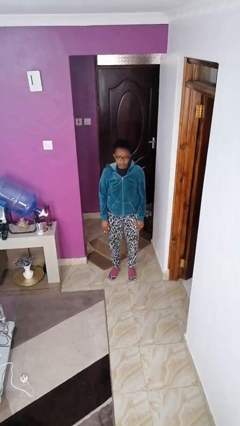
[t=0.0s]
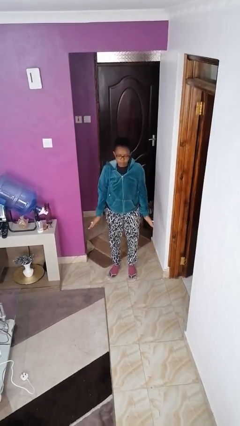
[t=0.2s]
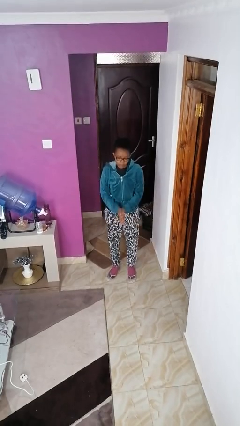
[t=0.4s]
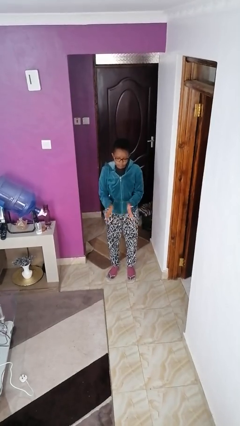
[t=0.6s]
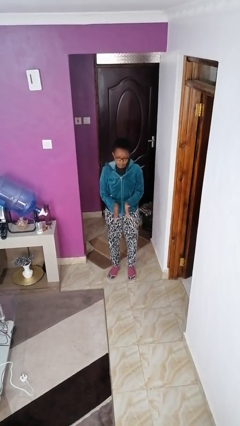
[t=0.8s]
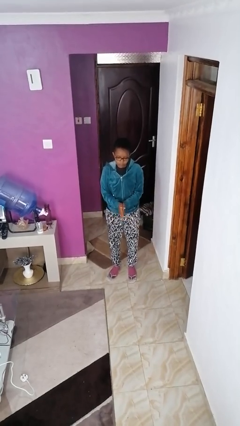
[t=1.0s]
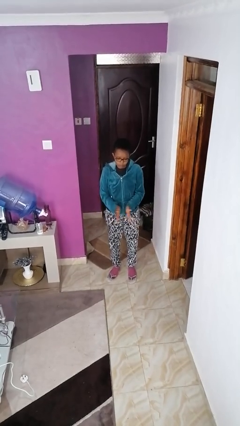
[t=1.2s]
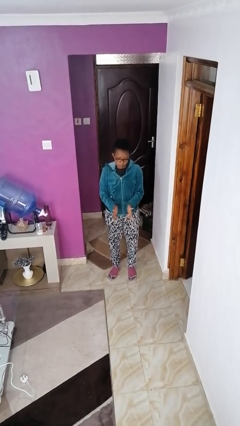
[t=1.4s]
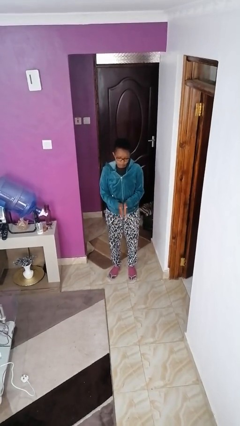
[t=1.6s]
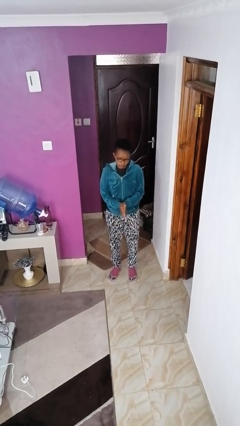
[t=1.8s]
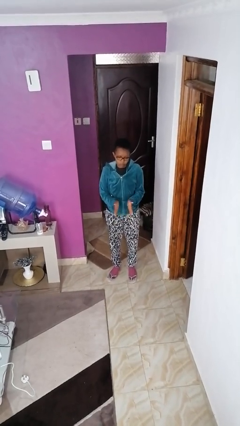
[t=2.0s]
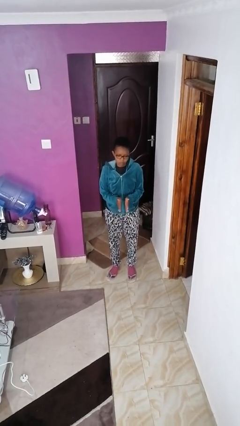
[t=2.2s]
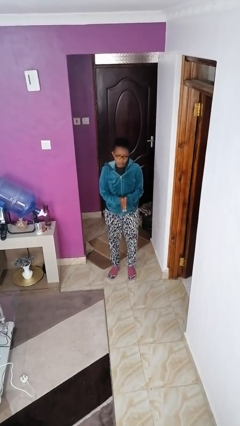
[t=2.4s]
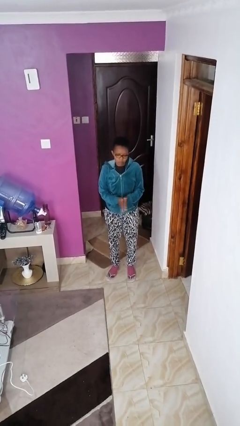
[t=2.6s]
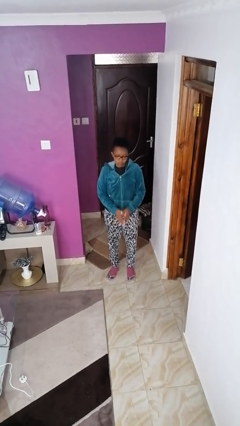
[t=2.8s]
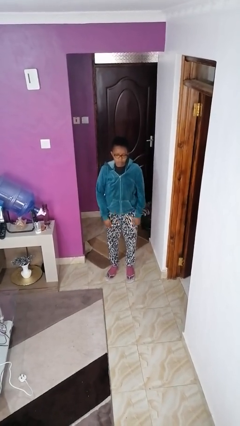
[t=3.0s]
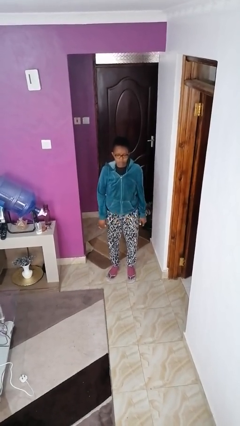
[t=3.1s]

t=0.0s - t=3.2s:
person claps hands

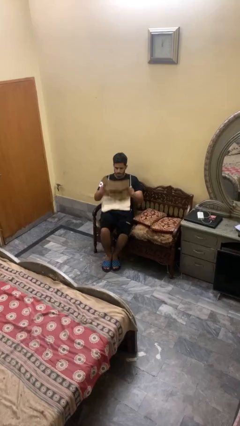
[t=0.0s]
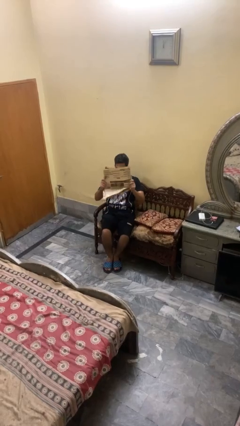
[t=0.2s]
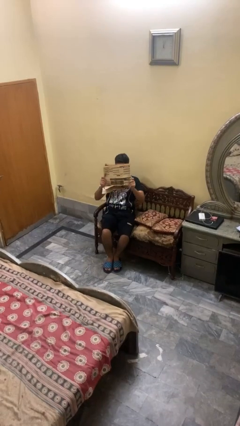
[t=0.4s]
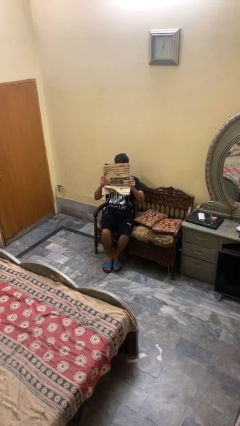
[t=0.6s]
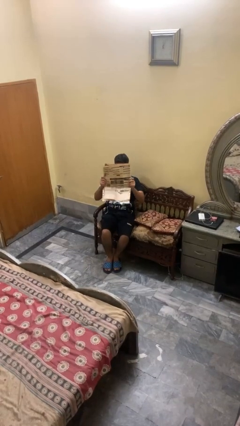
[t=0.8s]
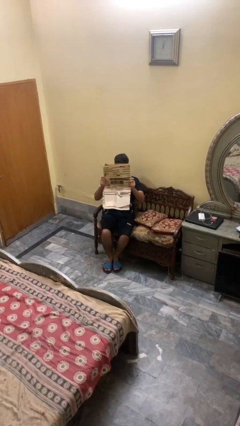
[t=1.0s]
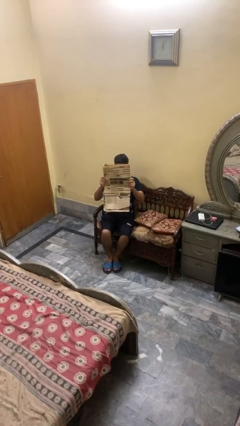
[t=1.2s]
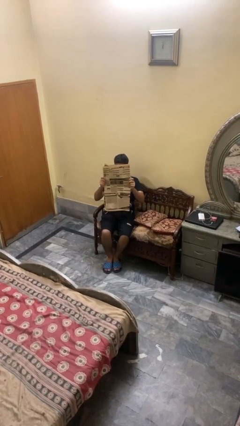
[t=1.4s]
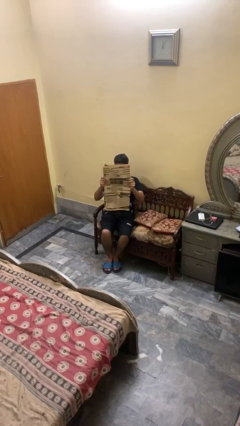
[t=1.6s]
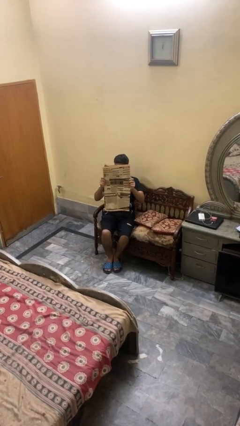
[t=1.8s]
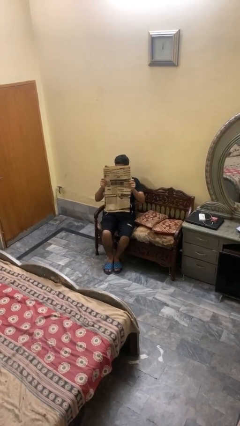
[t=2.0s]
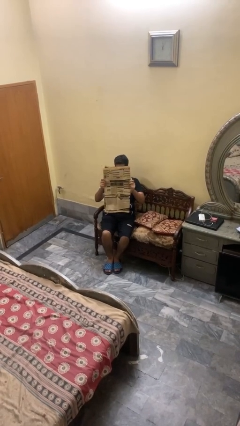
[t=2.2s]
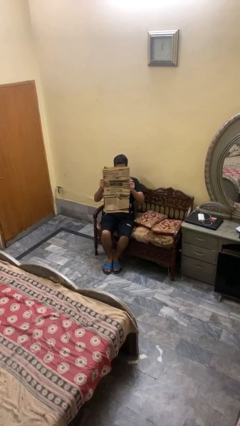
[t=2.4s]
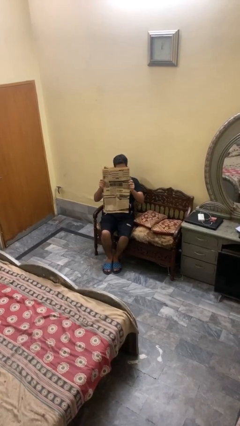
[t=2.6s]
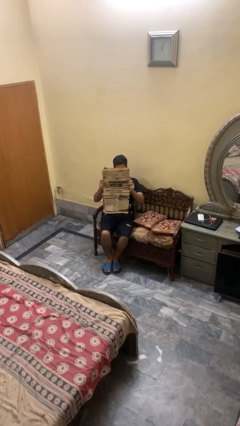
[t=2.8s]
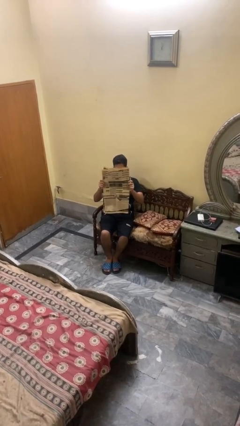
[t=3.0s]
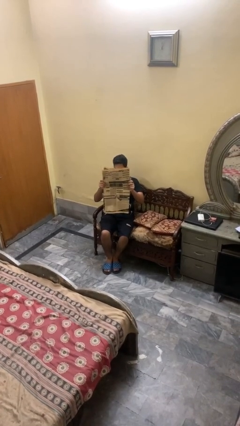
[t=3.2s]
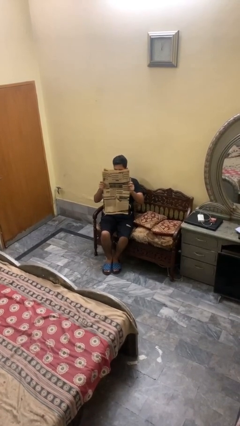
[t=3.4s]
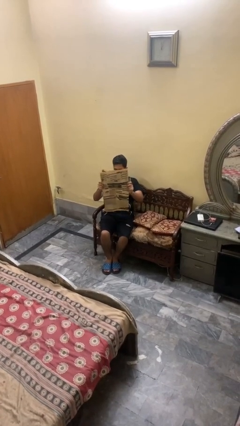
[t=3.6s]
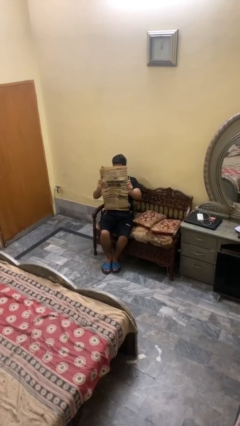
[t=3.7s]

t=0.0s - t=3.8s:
person reads newspaper

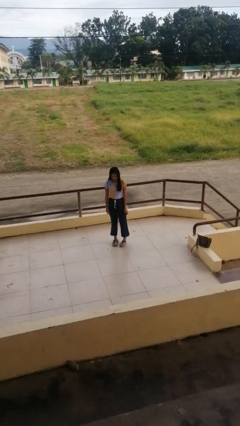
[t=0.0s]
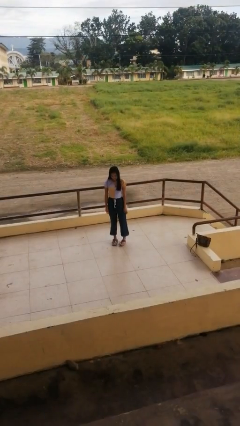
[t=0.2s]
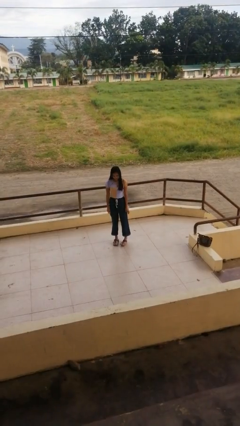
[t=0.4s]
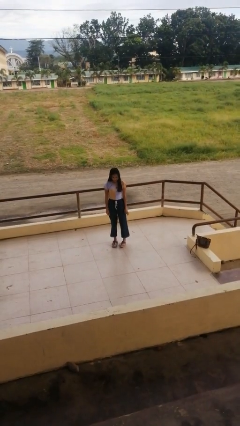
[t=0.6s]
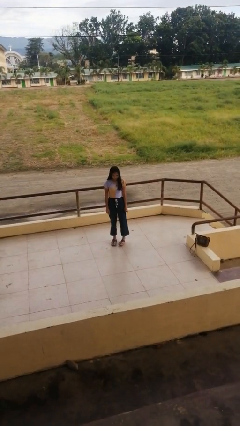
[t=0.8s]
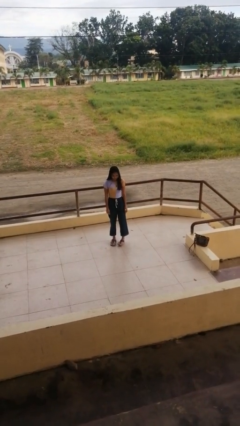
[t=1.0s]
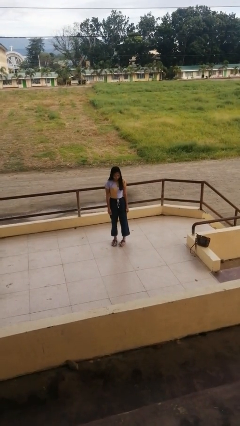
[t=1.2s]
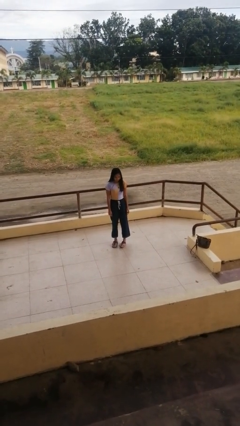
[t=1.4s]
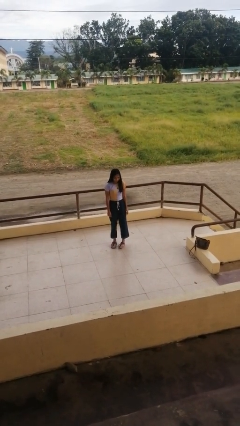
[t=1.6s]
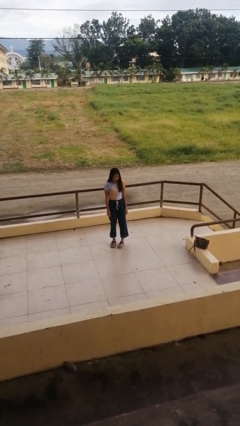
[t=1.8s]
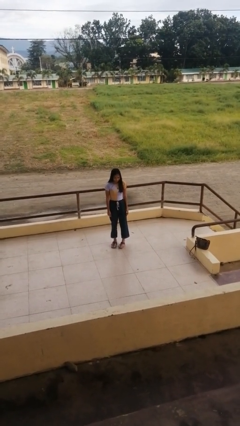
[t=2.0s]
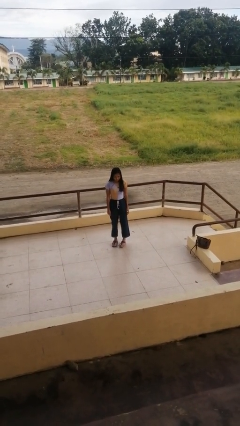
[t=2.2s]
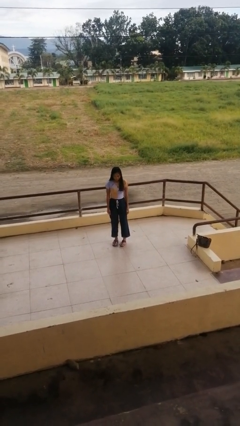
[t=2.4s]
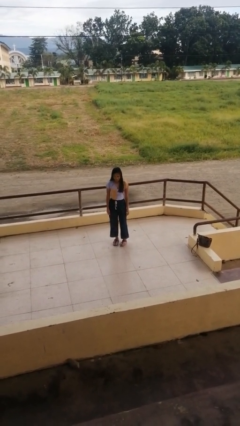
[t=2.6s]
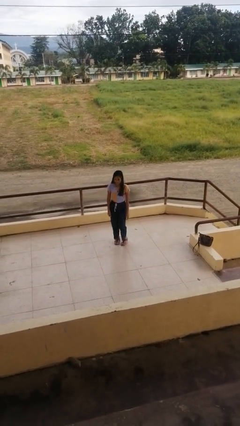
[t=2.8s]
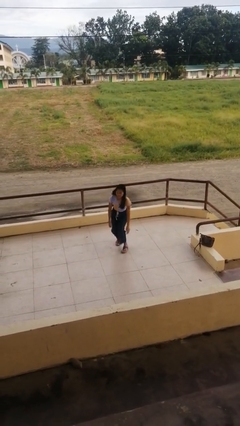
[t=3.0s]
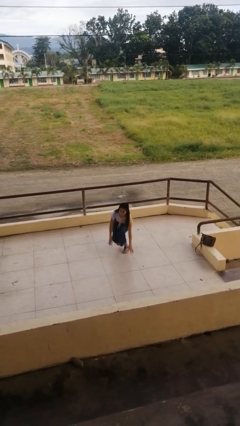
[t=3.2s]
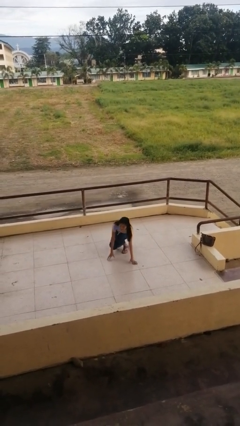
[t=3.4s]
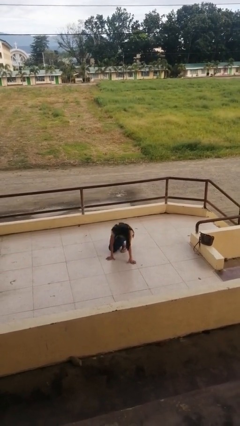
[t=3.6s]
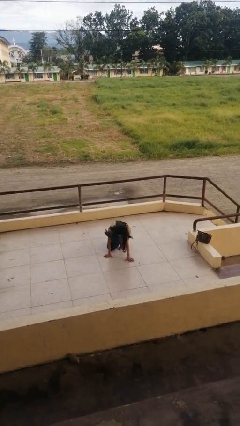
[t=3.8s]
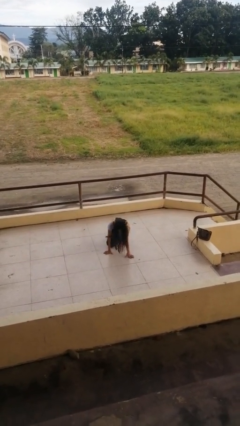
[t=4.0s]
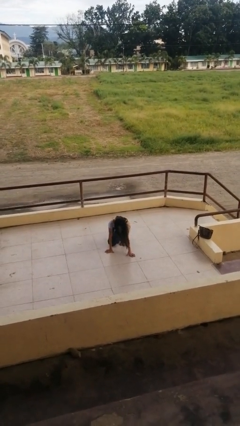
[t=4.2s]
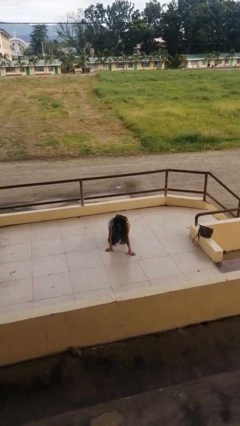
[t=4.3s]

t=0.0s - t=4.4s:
person falls while standing

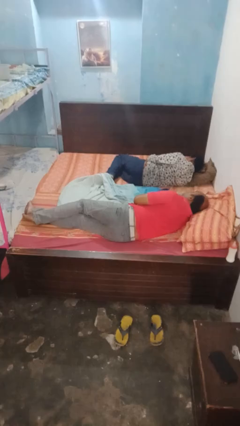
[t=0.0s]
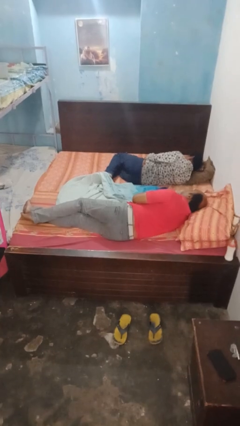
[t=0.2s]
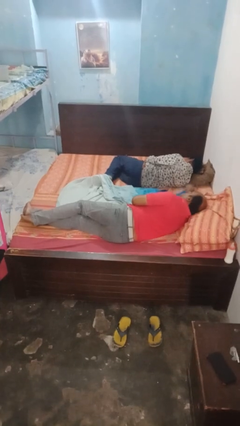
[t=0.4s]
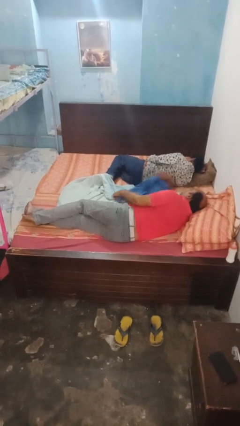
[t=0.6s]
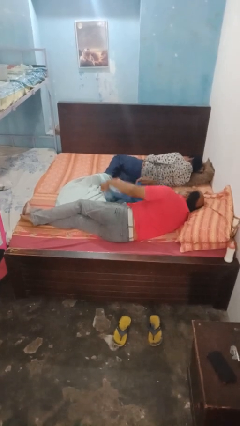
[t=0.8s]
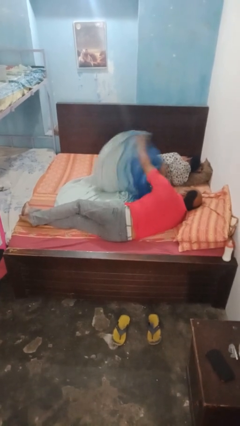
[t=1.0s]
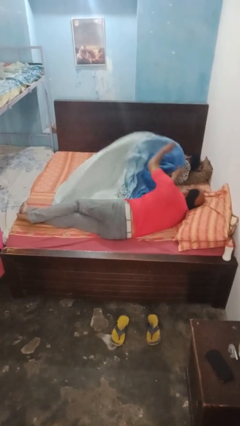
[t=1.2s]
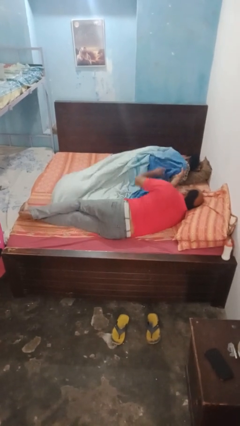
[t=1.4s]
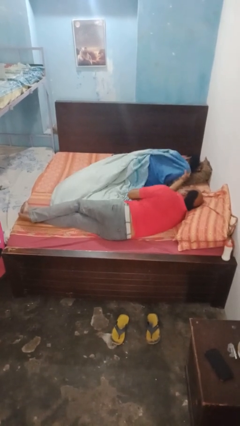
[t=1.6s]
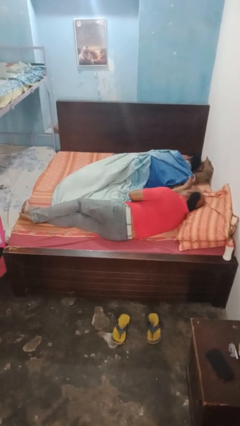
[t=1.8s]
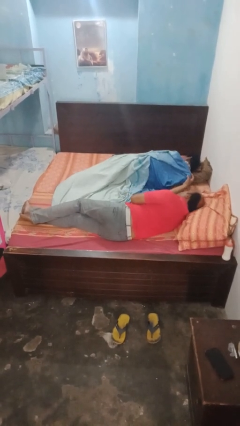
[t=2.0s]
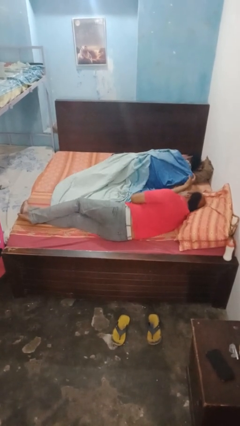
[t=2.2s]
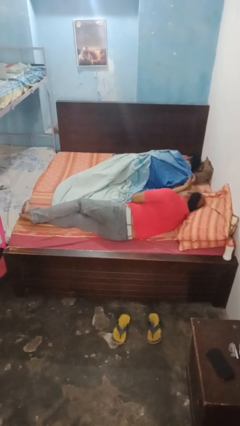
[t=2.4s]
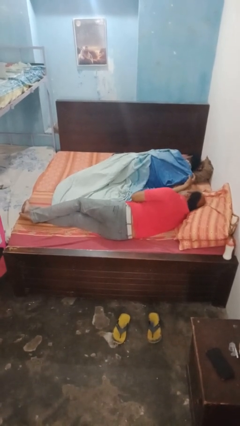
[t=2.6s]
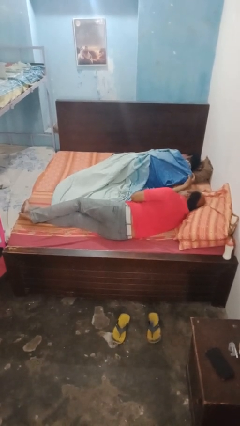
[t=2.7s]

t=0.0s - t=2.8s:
person covers friend with blanket

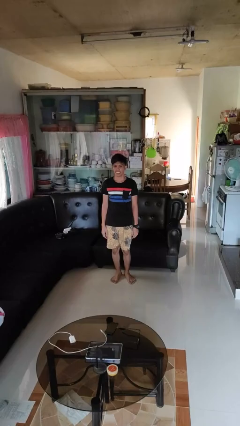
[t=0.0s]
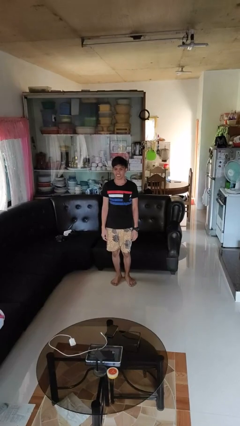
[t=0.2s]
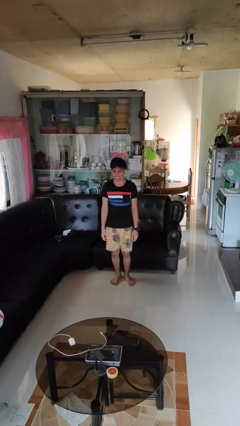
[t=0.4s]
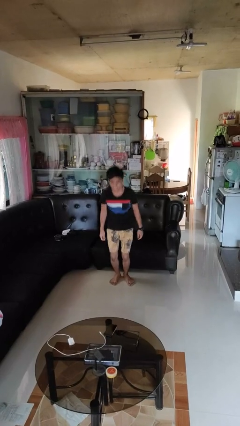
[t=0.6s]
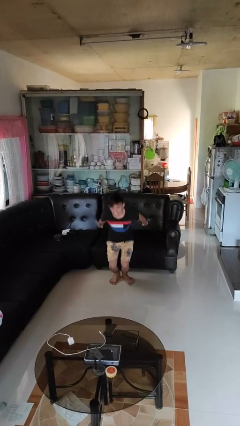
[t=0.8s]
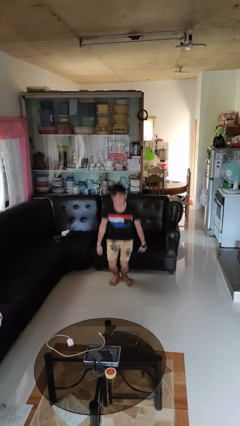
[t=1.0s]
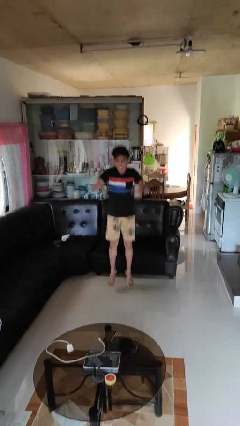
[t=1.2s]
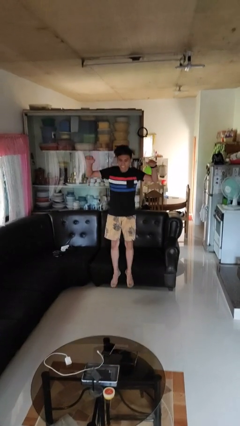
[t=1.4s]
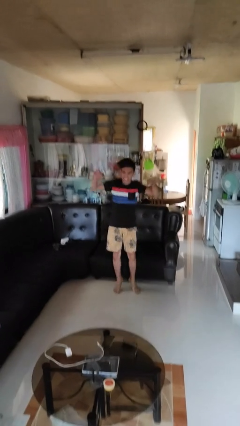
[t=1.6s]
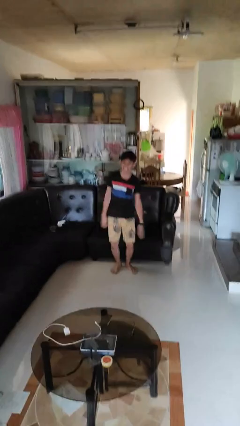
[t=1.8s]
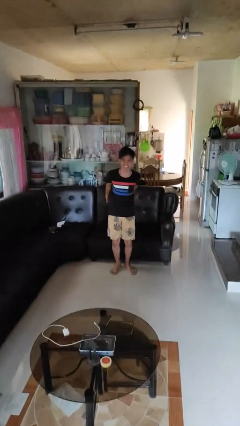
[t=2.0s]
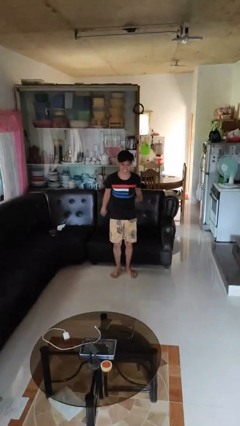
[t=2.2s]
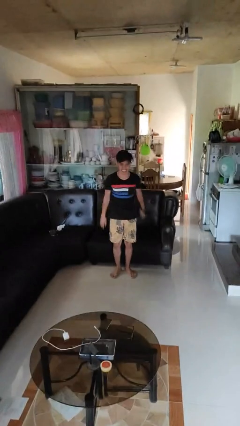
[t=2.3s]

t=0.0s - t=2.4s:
person jumps

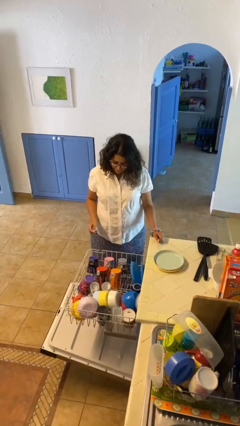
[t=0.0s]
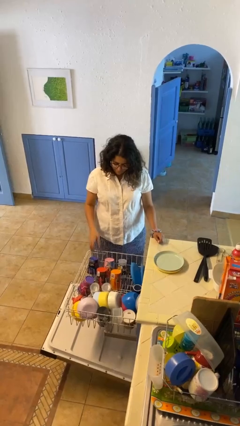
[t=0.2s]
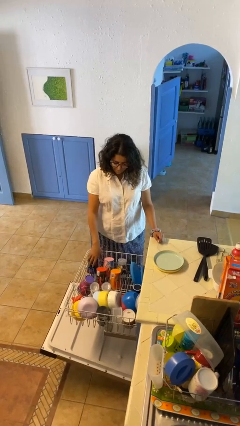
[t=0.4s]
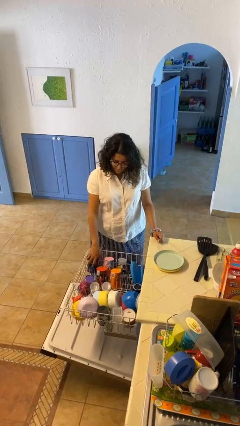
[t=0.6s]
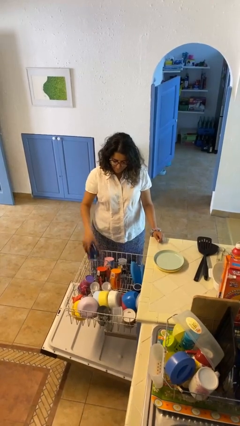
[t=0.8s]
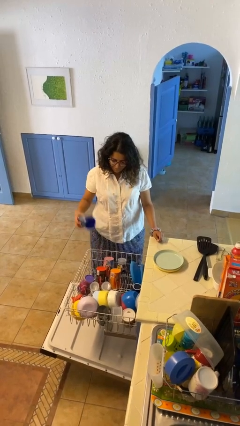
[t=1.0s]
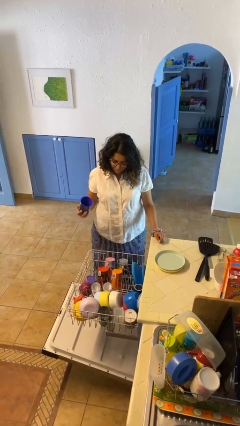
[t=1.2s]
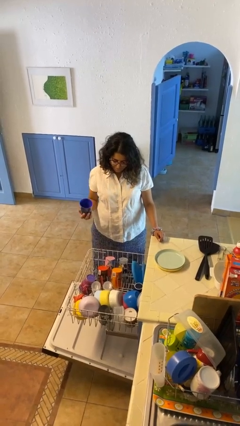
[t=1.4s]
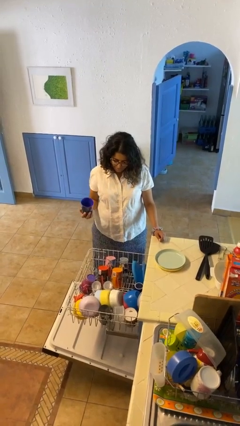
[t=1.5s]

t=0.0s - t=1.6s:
person unloads dishwasher
